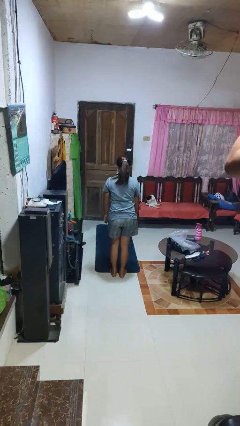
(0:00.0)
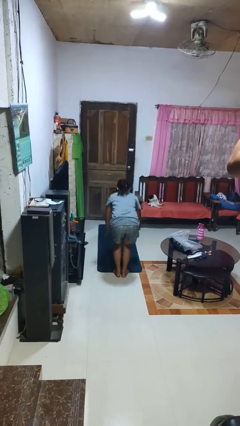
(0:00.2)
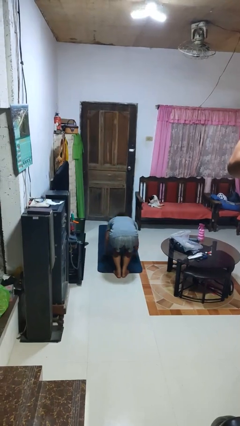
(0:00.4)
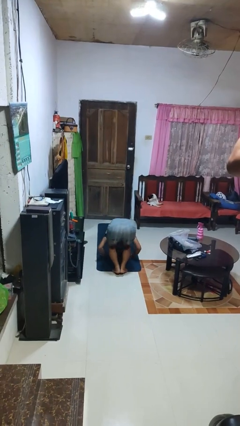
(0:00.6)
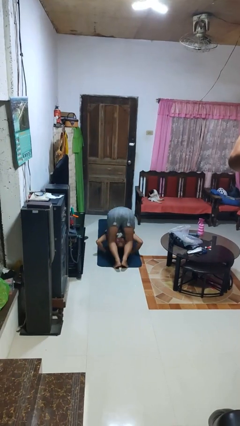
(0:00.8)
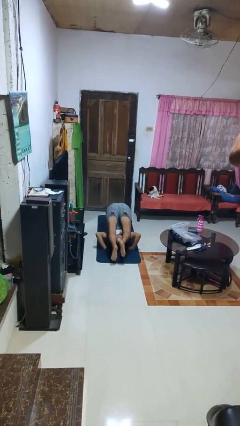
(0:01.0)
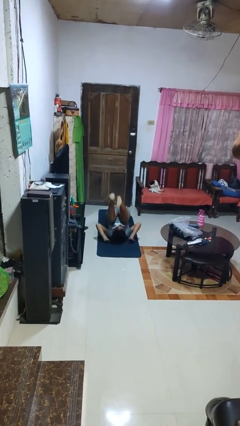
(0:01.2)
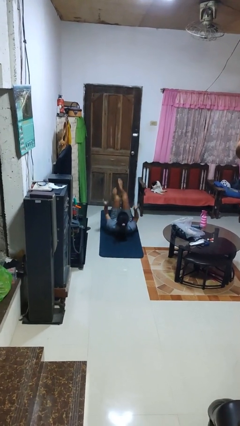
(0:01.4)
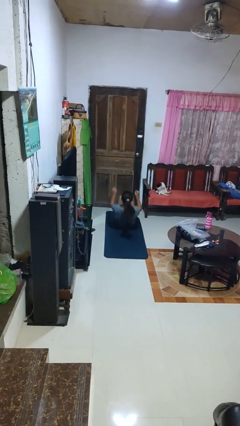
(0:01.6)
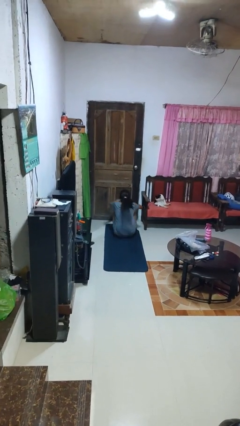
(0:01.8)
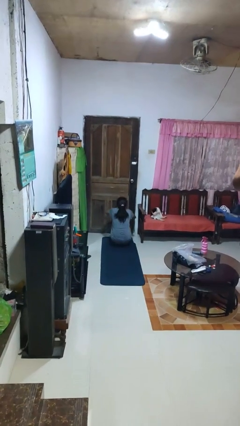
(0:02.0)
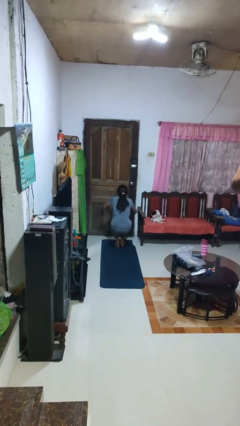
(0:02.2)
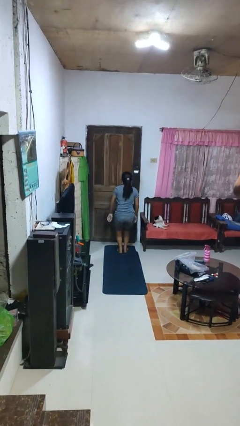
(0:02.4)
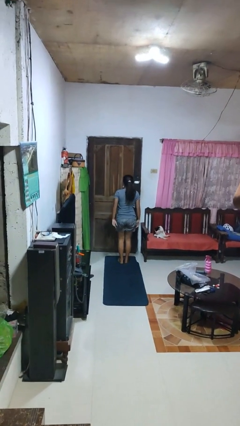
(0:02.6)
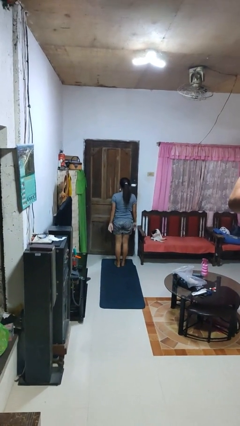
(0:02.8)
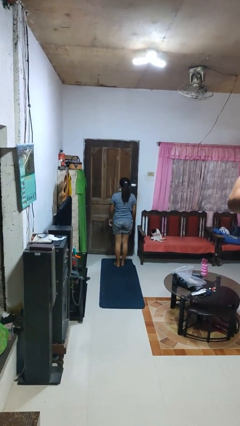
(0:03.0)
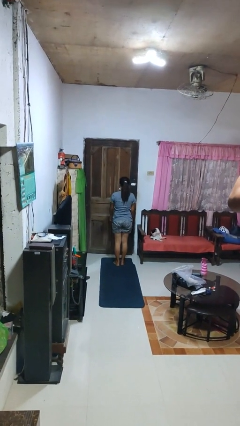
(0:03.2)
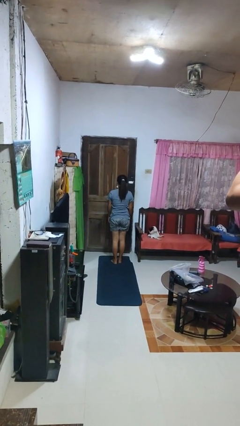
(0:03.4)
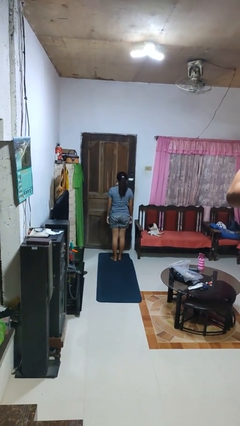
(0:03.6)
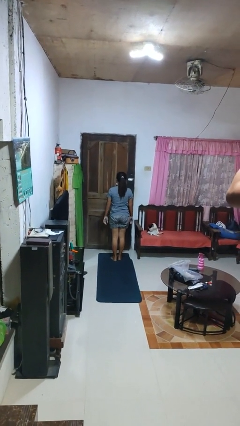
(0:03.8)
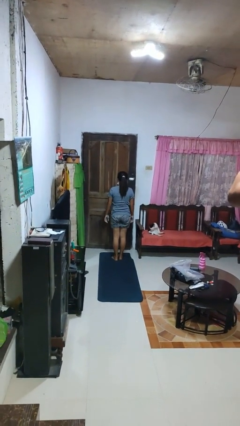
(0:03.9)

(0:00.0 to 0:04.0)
person somersaults

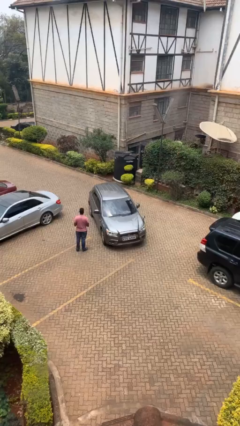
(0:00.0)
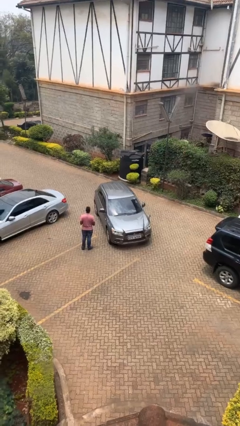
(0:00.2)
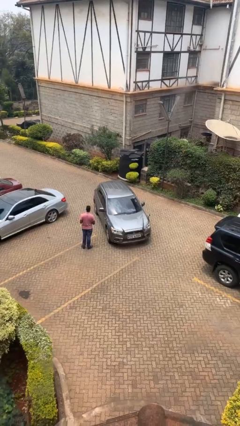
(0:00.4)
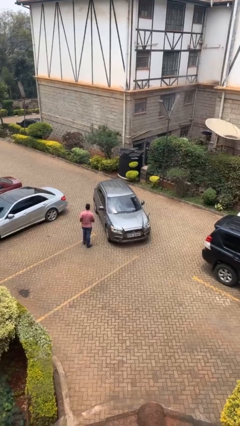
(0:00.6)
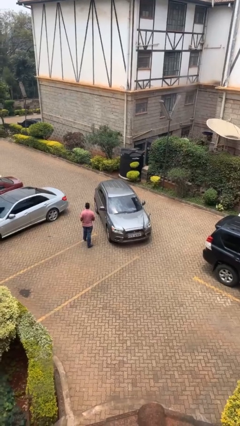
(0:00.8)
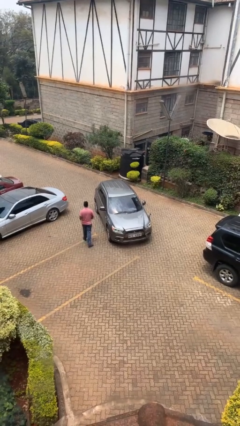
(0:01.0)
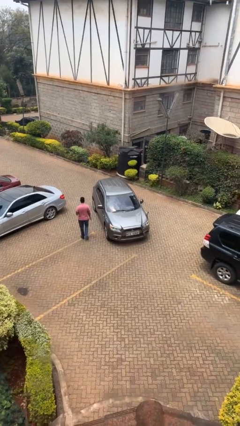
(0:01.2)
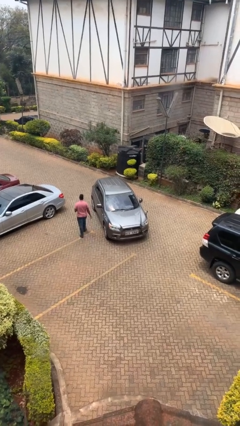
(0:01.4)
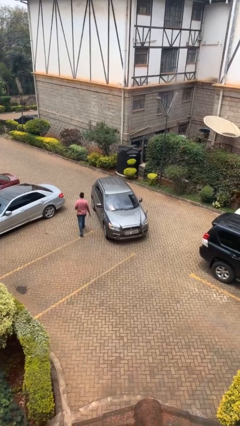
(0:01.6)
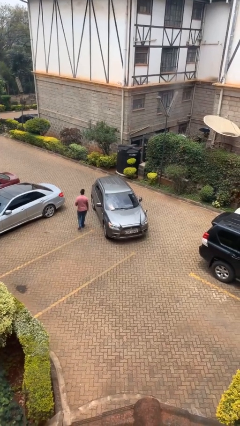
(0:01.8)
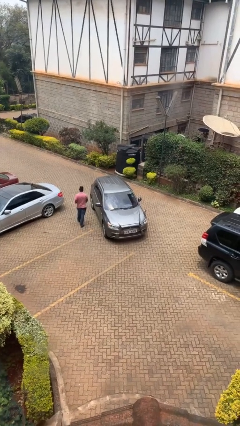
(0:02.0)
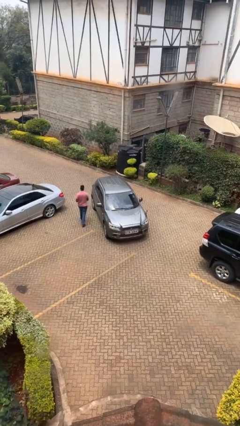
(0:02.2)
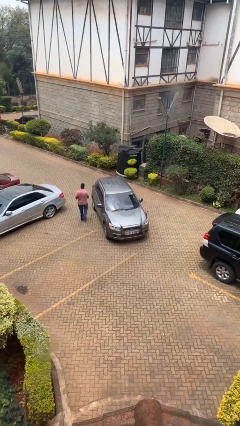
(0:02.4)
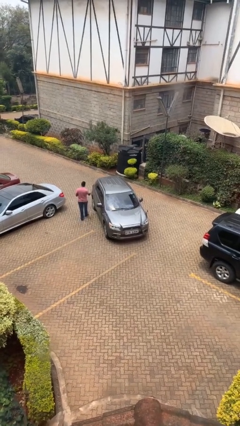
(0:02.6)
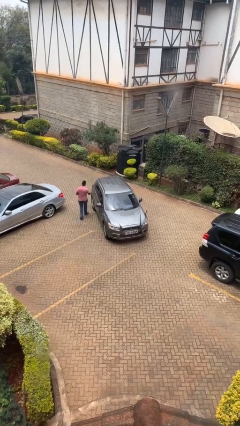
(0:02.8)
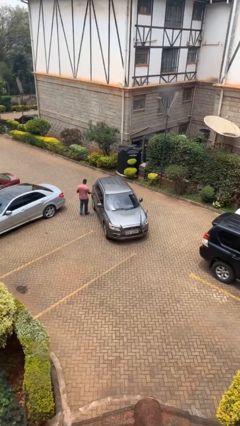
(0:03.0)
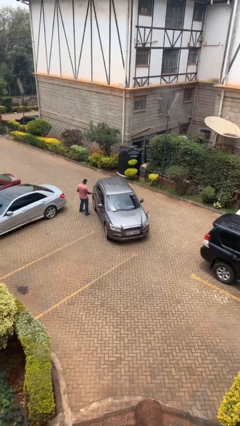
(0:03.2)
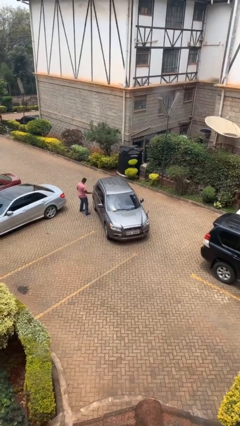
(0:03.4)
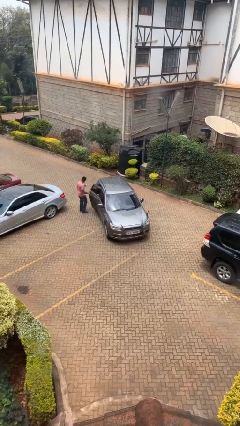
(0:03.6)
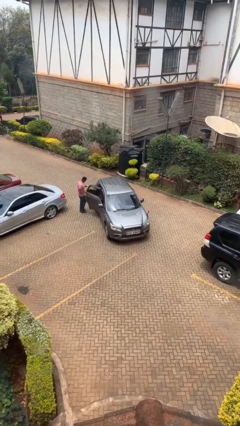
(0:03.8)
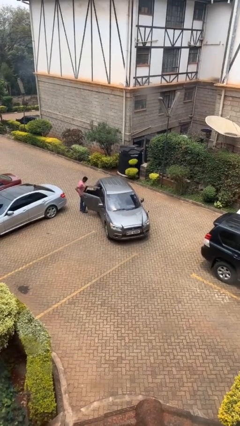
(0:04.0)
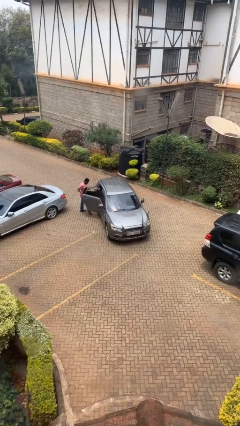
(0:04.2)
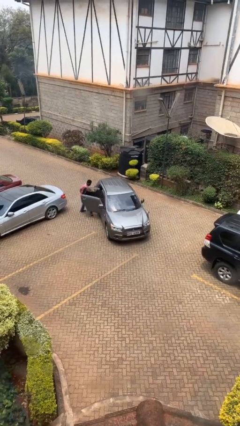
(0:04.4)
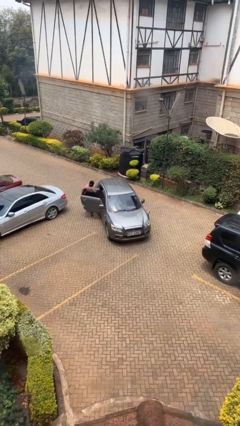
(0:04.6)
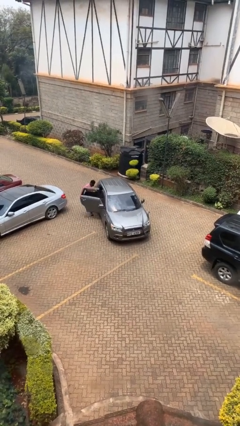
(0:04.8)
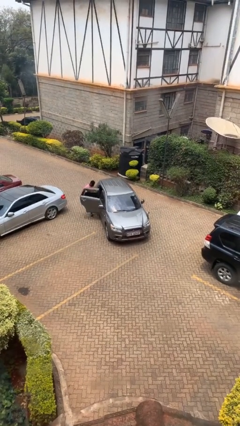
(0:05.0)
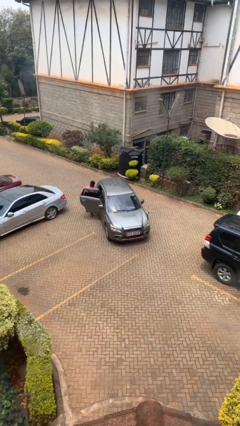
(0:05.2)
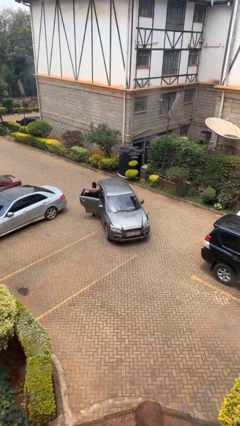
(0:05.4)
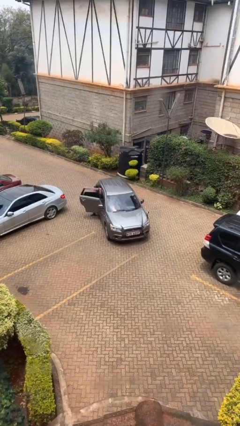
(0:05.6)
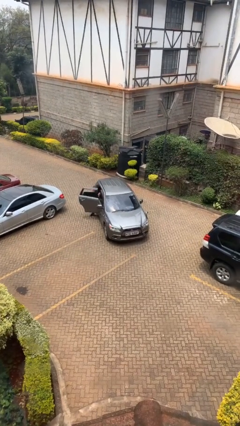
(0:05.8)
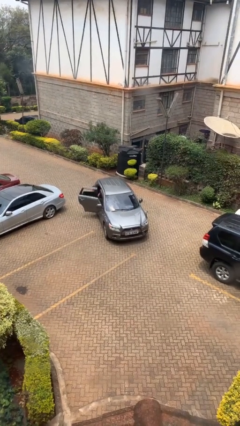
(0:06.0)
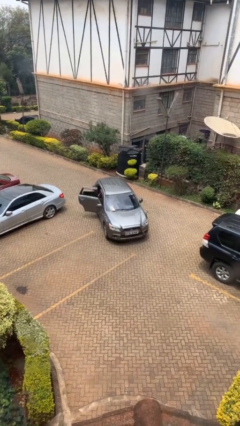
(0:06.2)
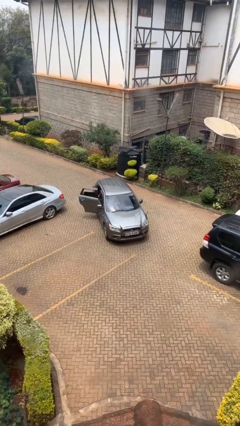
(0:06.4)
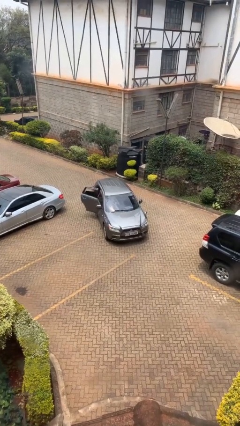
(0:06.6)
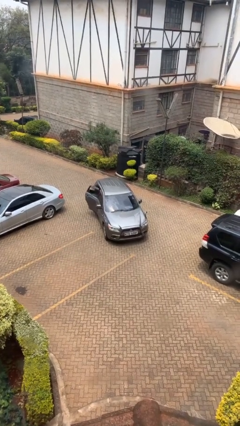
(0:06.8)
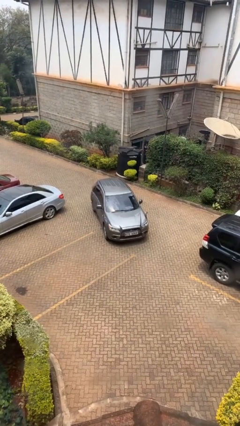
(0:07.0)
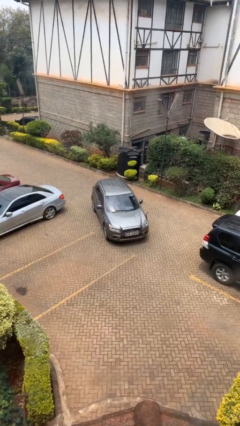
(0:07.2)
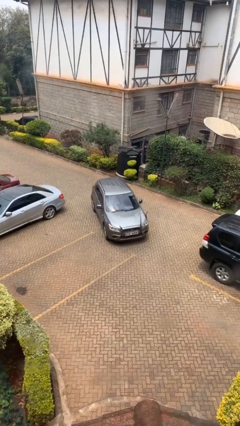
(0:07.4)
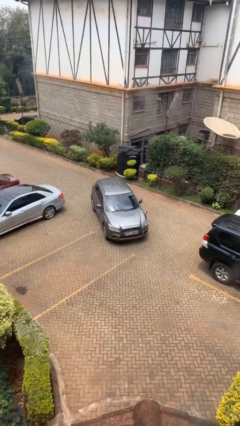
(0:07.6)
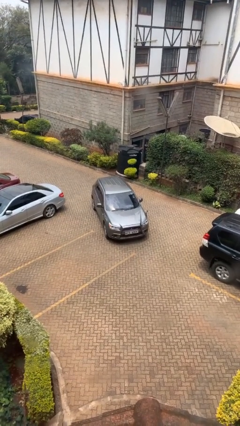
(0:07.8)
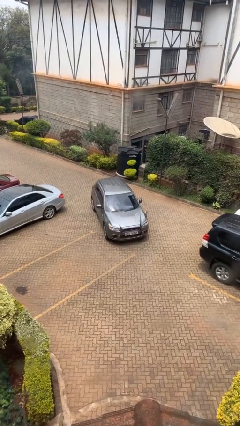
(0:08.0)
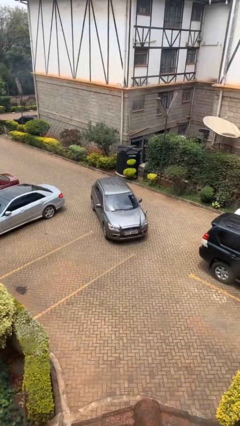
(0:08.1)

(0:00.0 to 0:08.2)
car picks up person

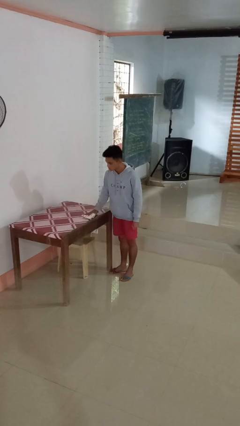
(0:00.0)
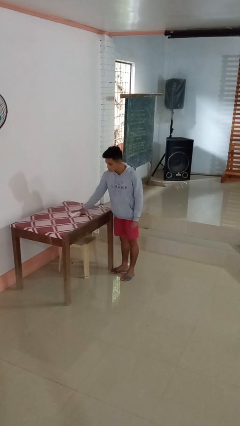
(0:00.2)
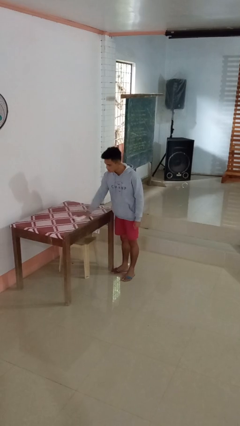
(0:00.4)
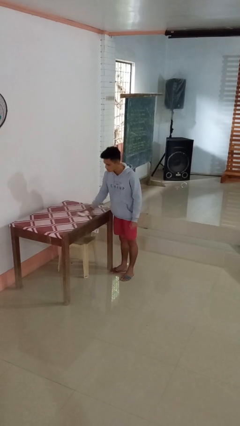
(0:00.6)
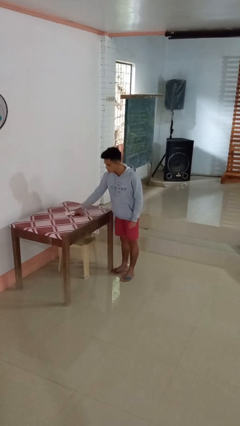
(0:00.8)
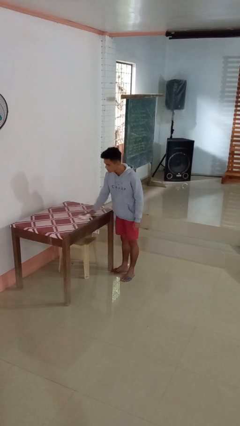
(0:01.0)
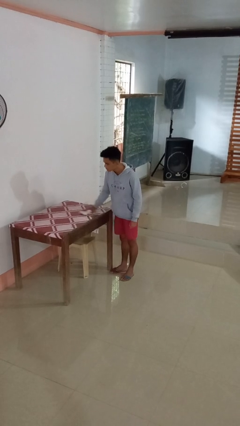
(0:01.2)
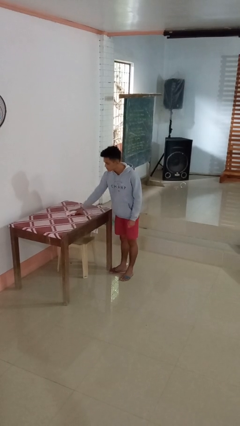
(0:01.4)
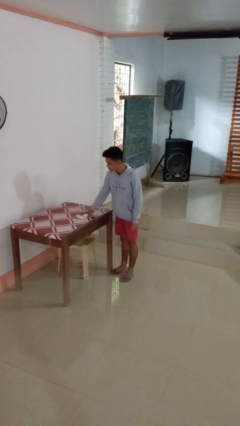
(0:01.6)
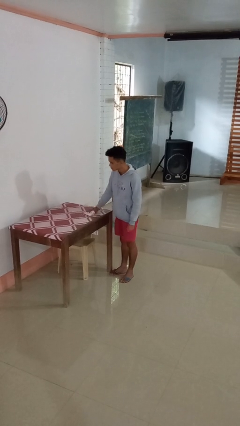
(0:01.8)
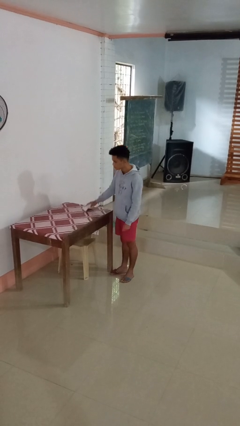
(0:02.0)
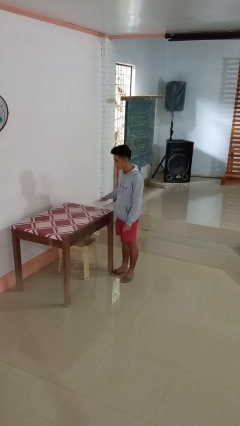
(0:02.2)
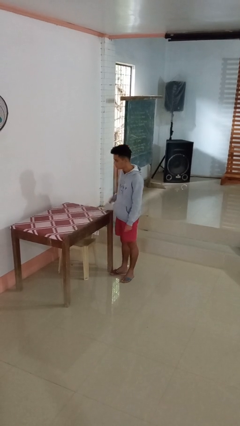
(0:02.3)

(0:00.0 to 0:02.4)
person cleans table with rag

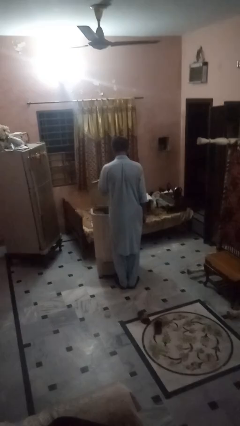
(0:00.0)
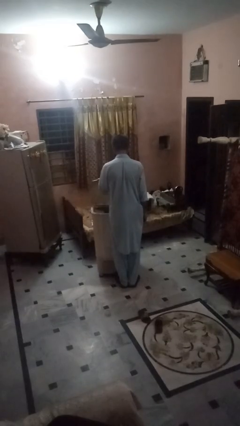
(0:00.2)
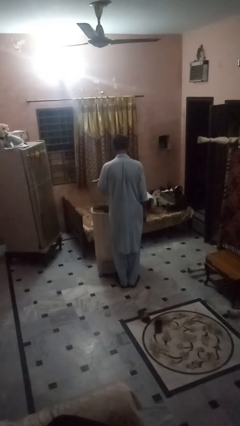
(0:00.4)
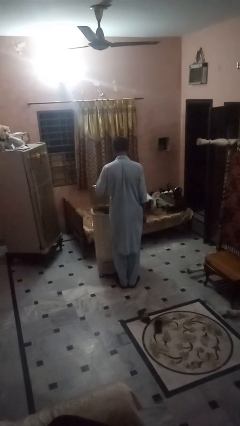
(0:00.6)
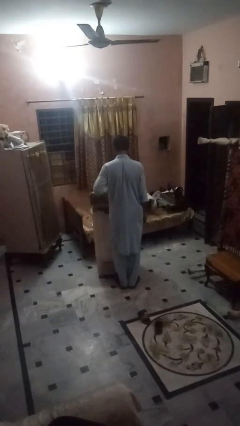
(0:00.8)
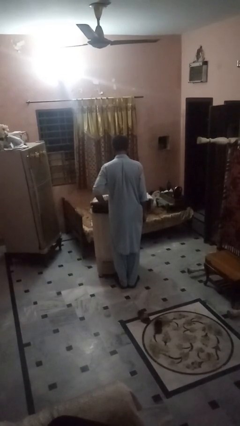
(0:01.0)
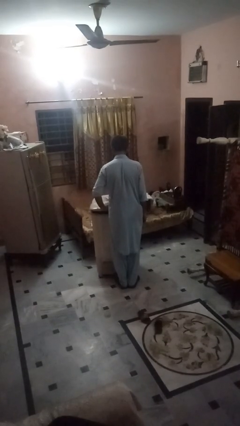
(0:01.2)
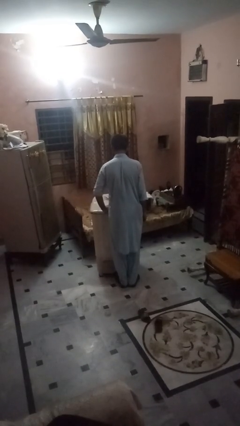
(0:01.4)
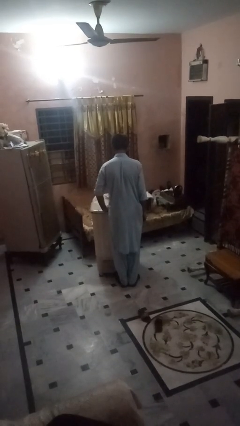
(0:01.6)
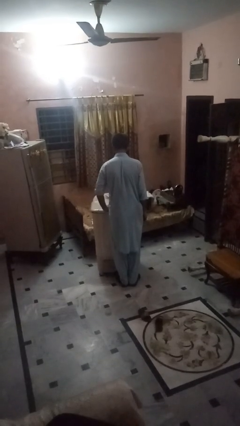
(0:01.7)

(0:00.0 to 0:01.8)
person closes clothes washer

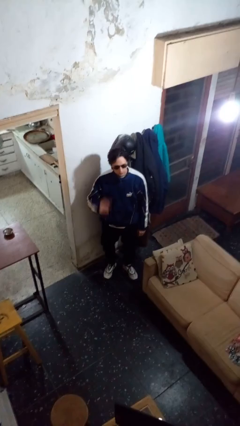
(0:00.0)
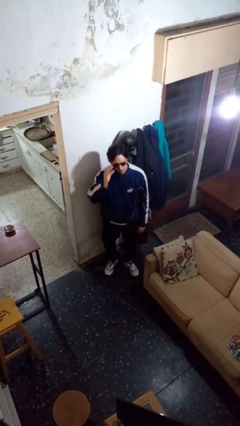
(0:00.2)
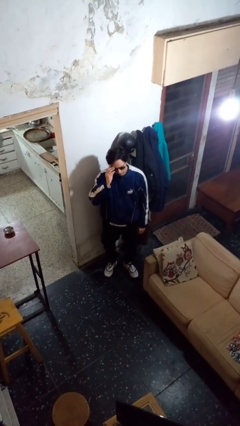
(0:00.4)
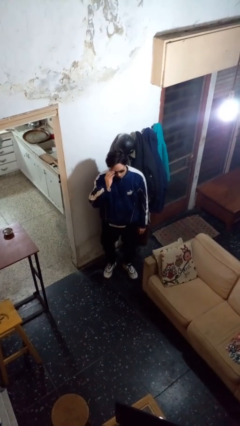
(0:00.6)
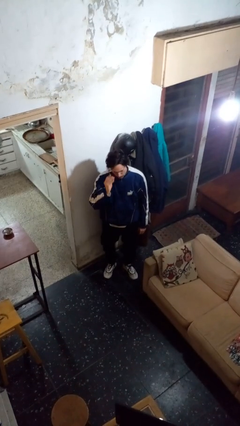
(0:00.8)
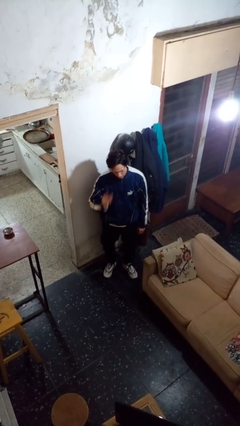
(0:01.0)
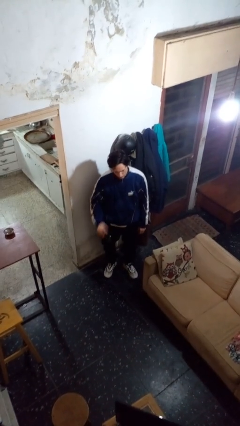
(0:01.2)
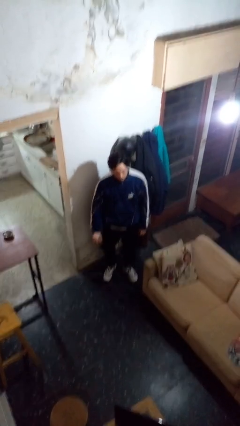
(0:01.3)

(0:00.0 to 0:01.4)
person takes off sunglasses
